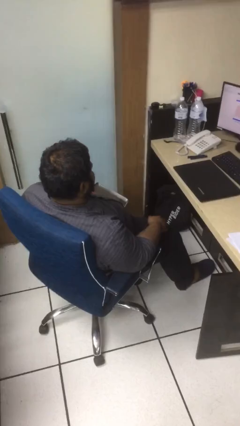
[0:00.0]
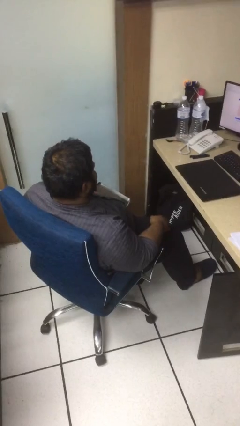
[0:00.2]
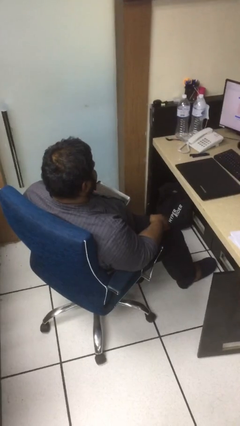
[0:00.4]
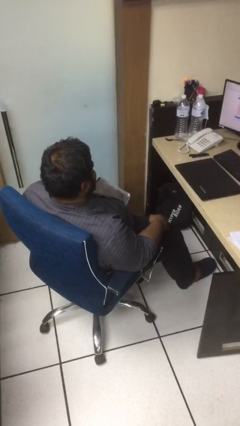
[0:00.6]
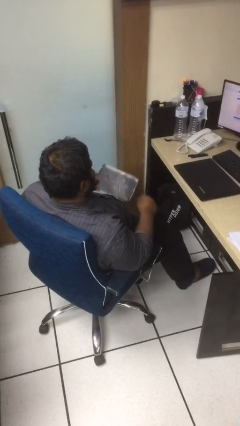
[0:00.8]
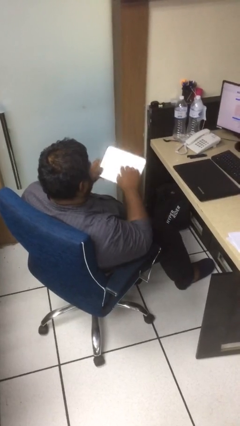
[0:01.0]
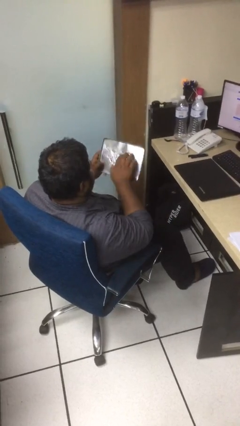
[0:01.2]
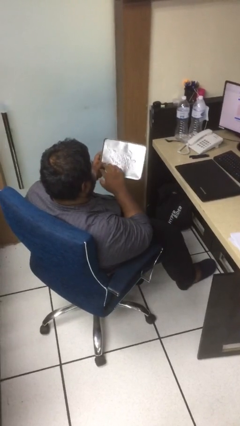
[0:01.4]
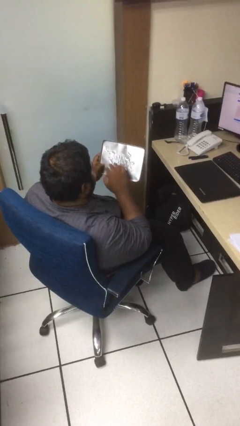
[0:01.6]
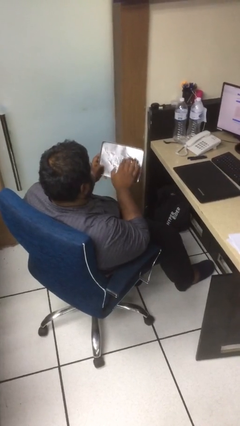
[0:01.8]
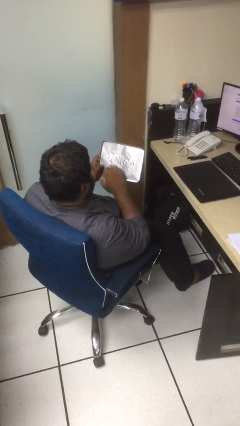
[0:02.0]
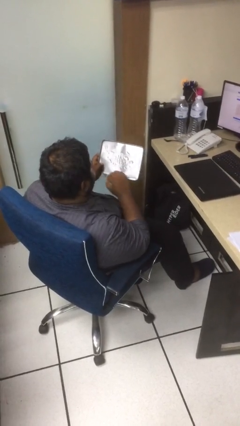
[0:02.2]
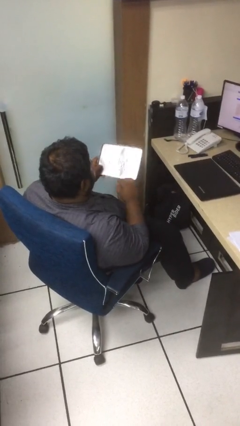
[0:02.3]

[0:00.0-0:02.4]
person interacts with tablet

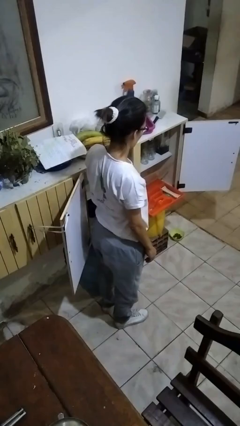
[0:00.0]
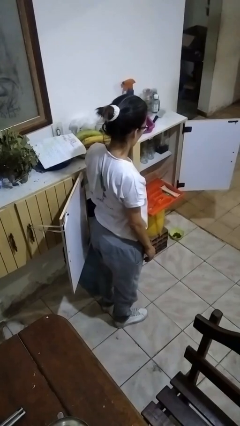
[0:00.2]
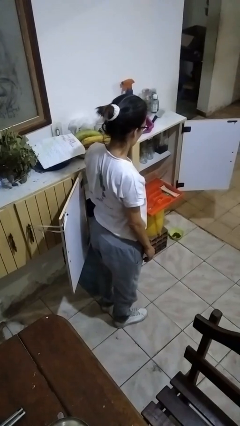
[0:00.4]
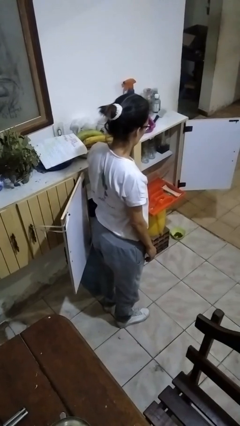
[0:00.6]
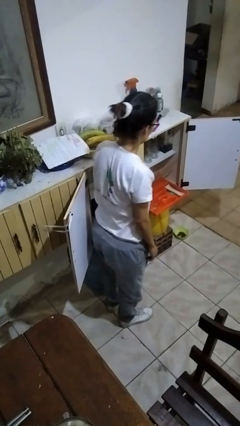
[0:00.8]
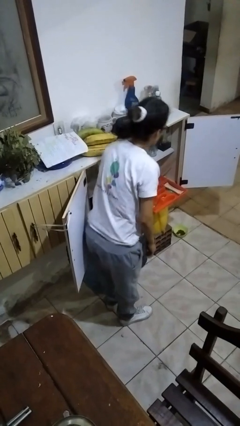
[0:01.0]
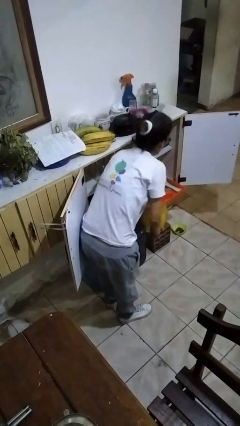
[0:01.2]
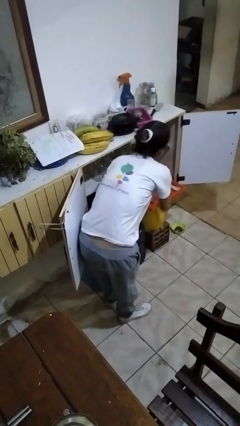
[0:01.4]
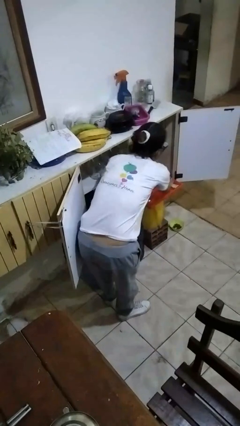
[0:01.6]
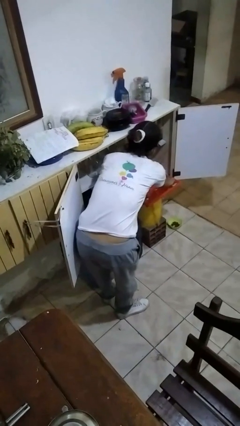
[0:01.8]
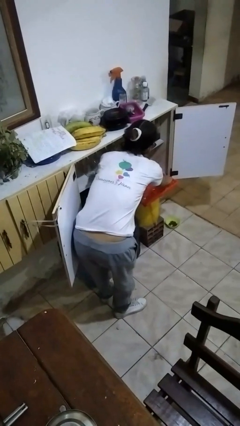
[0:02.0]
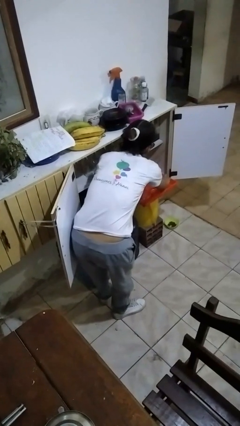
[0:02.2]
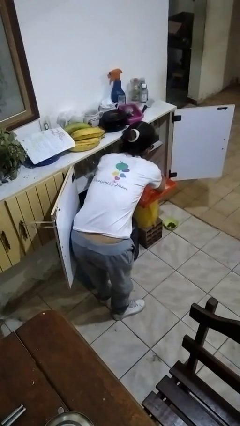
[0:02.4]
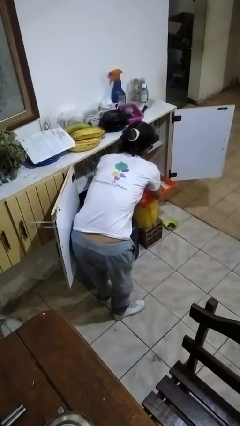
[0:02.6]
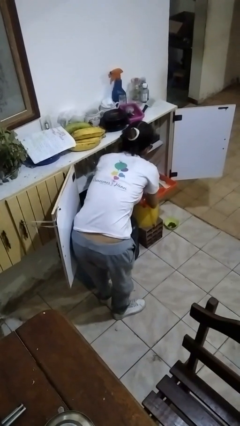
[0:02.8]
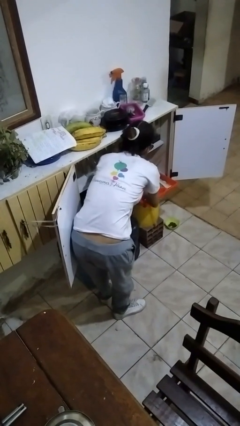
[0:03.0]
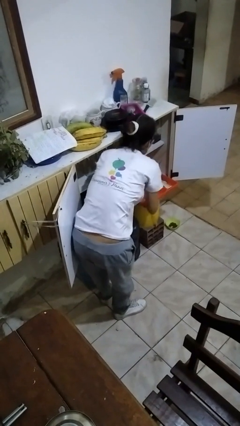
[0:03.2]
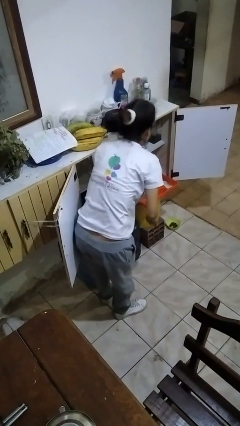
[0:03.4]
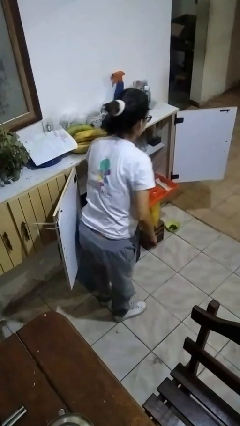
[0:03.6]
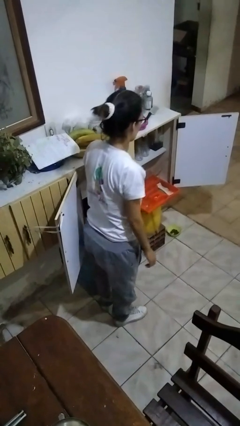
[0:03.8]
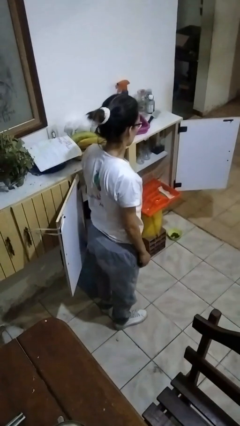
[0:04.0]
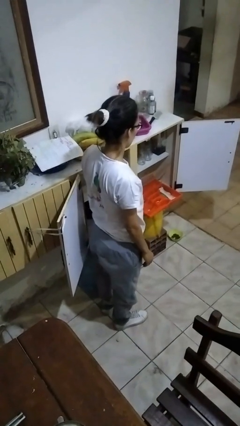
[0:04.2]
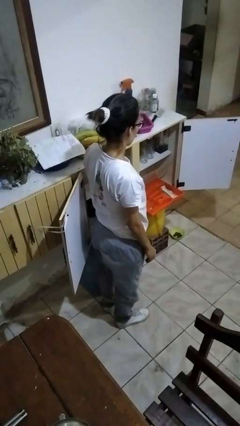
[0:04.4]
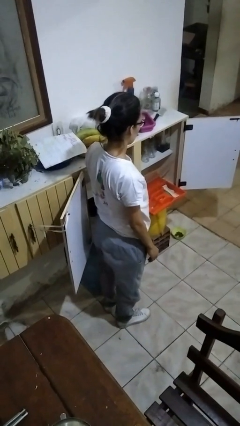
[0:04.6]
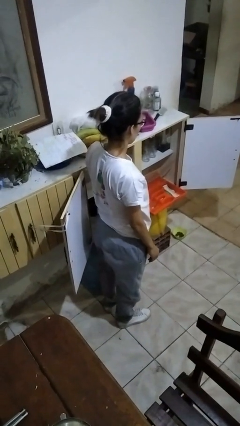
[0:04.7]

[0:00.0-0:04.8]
person searches in kitchen drawer

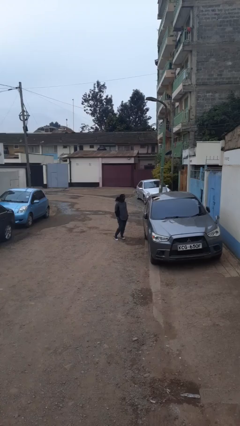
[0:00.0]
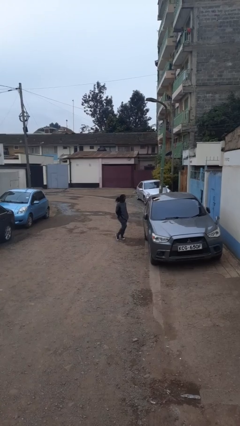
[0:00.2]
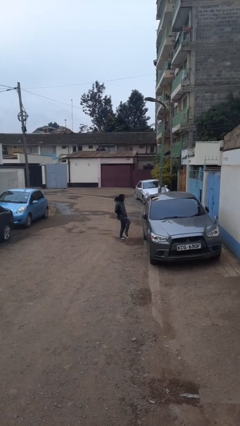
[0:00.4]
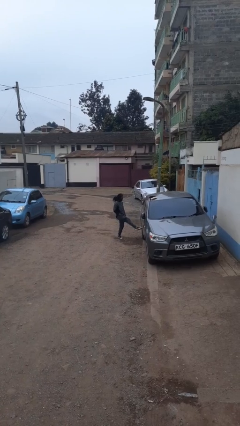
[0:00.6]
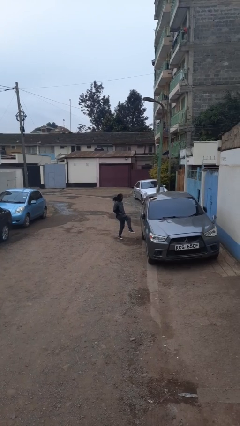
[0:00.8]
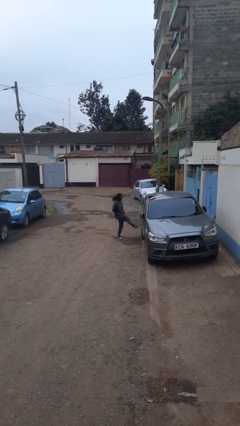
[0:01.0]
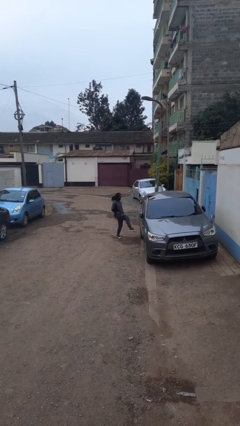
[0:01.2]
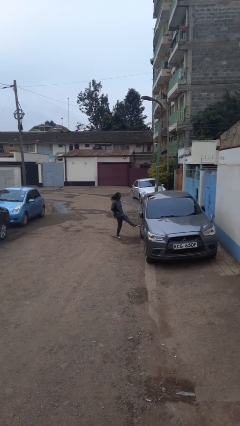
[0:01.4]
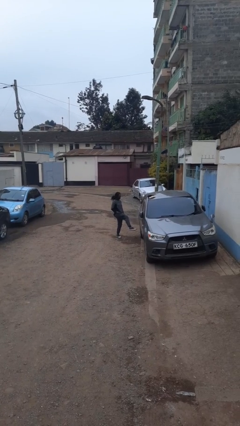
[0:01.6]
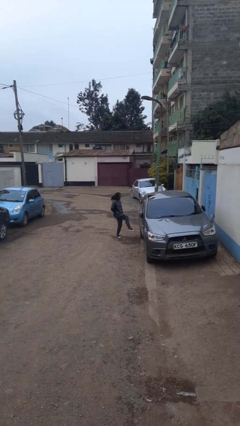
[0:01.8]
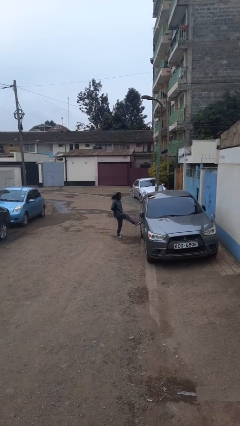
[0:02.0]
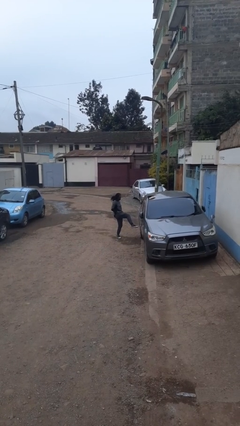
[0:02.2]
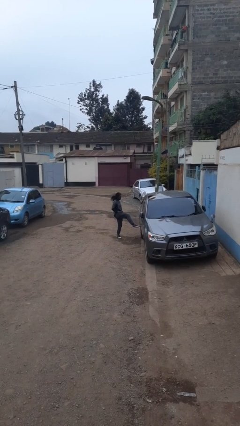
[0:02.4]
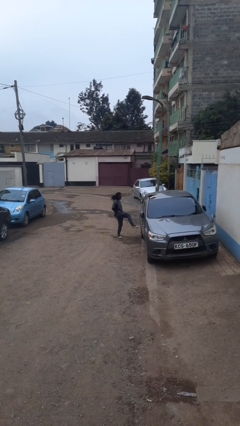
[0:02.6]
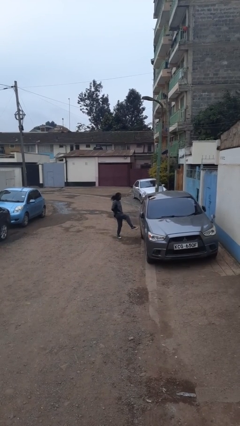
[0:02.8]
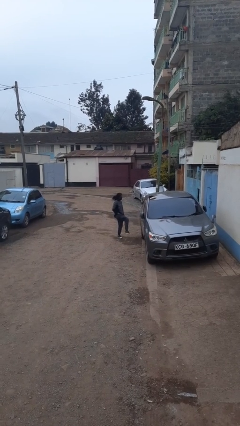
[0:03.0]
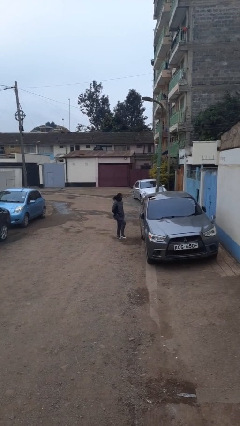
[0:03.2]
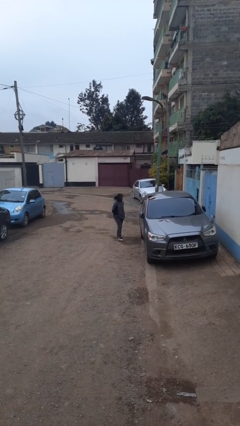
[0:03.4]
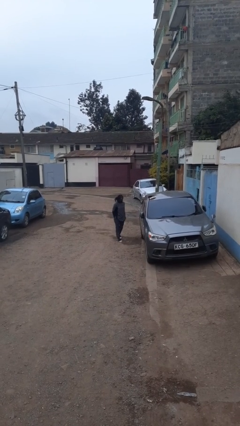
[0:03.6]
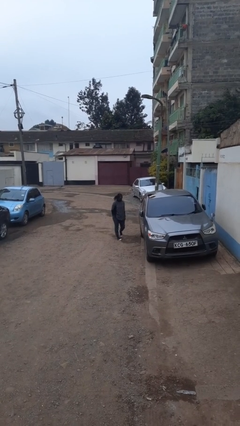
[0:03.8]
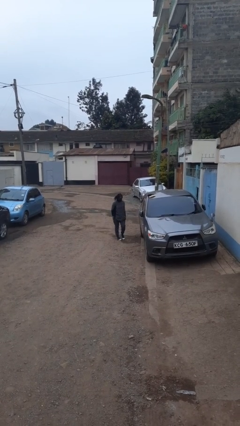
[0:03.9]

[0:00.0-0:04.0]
person kicks car tires

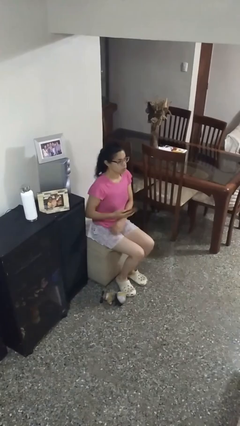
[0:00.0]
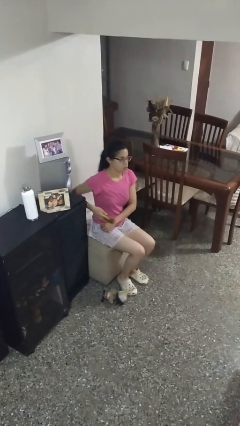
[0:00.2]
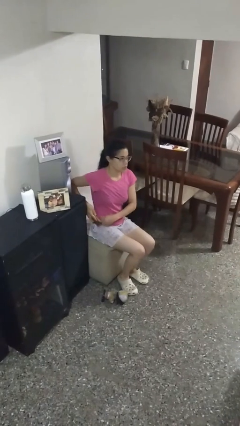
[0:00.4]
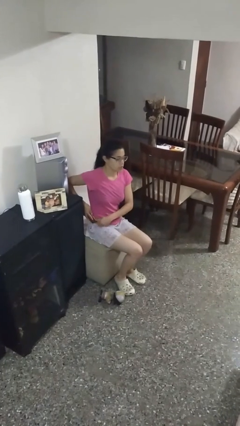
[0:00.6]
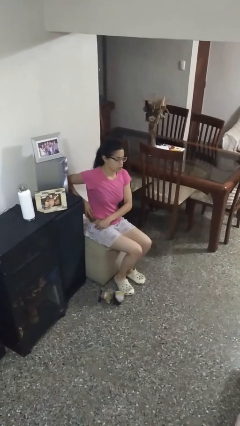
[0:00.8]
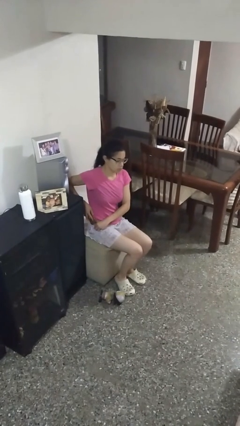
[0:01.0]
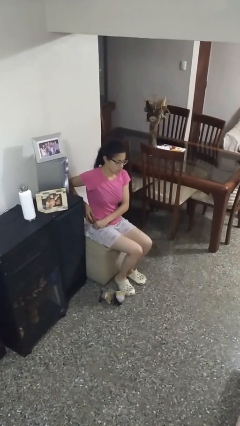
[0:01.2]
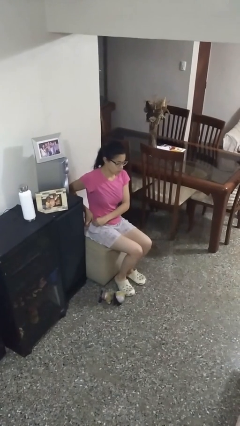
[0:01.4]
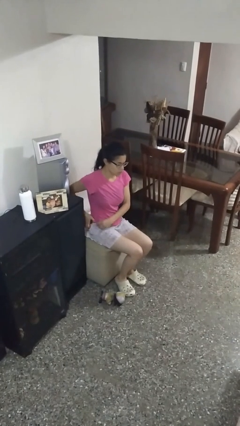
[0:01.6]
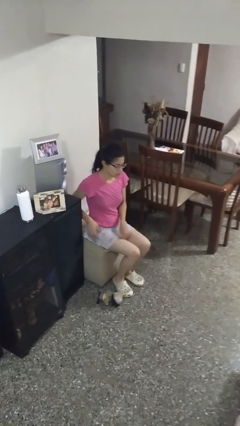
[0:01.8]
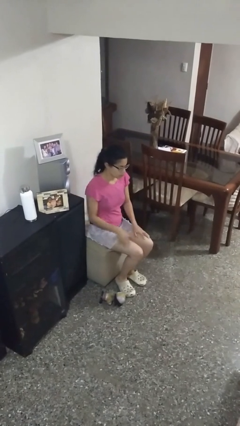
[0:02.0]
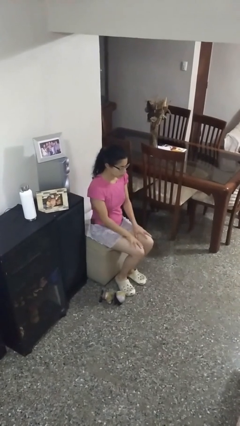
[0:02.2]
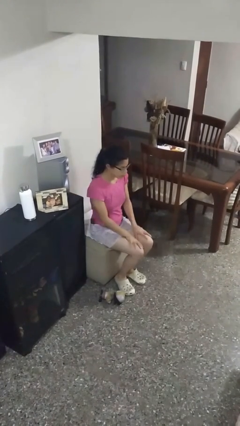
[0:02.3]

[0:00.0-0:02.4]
person puts phone into pocket

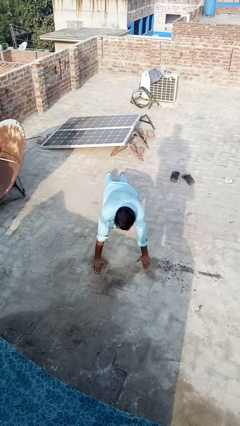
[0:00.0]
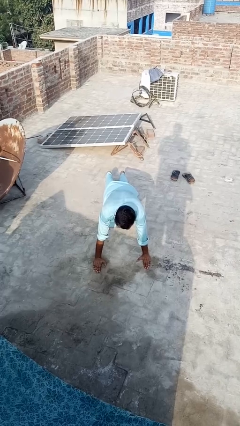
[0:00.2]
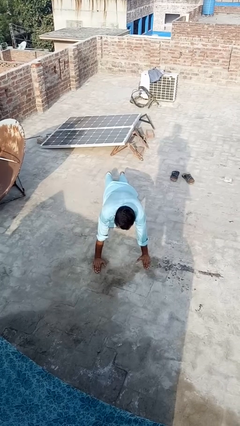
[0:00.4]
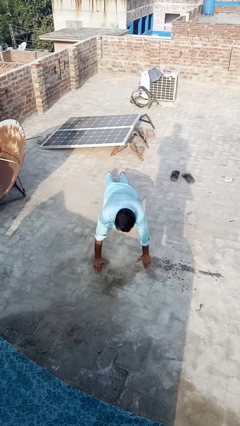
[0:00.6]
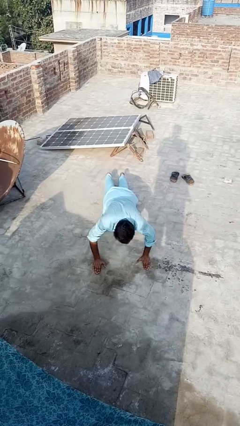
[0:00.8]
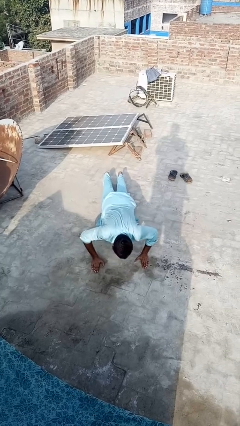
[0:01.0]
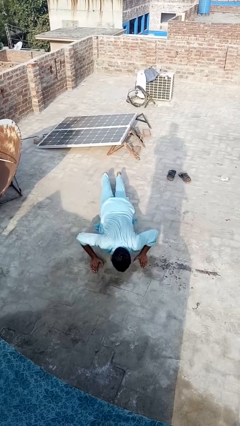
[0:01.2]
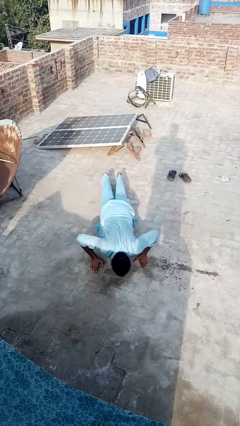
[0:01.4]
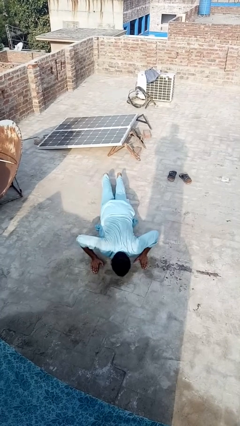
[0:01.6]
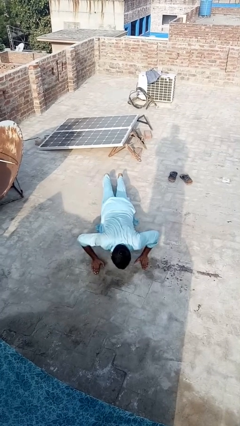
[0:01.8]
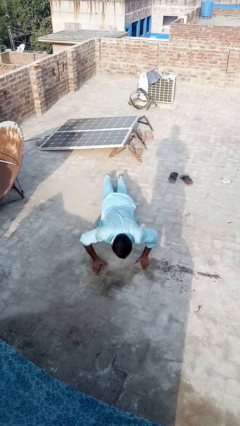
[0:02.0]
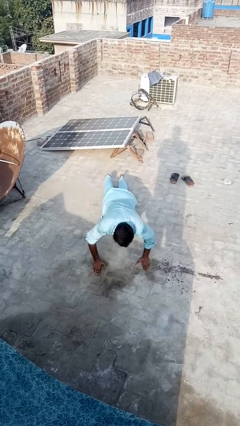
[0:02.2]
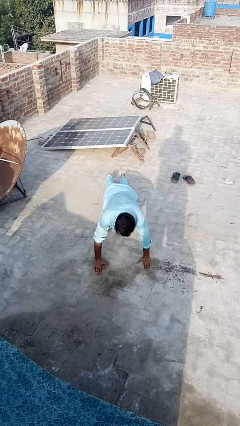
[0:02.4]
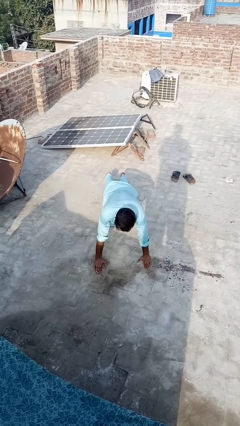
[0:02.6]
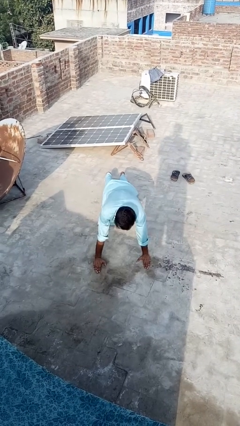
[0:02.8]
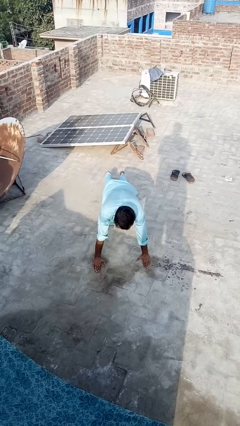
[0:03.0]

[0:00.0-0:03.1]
person exercises with pushup

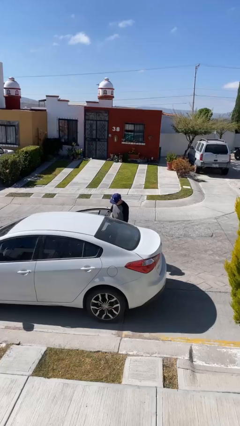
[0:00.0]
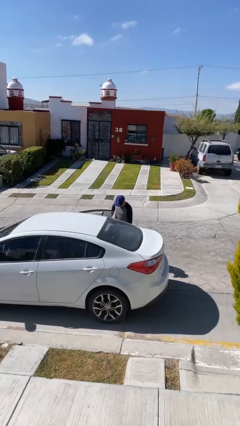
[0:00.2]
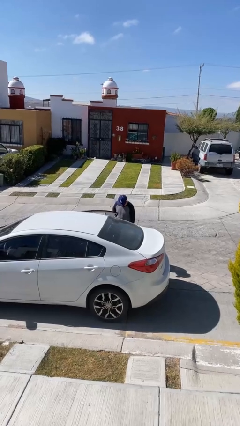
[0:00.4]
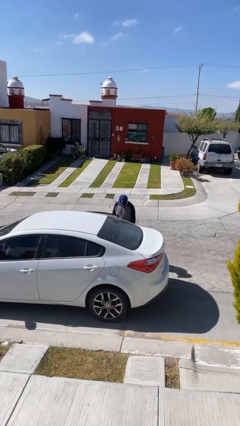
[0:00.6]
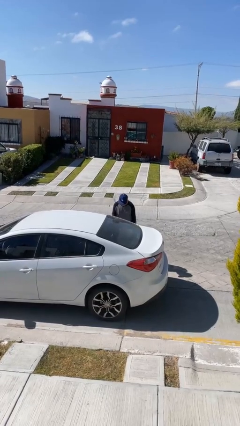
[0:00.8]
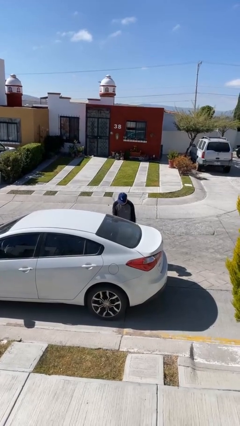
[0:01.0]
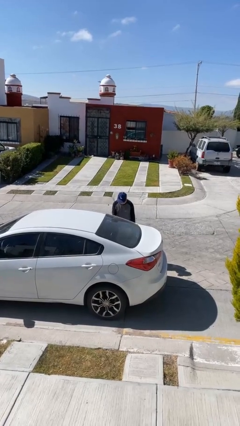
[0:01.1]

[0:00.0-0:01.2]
person closes car door
